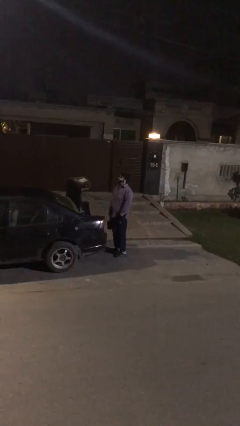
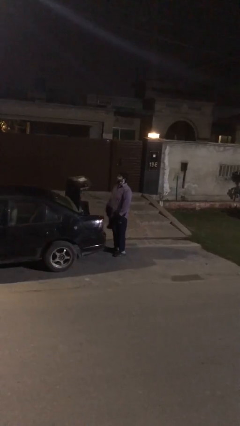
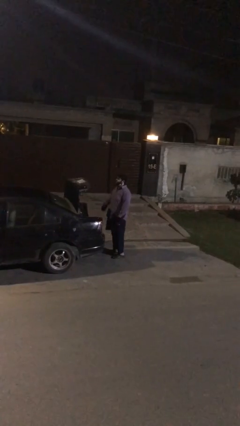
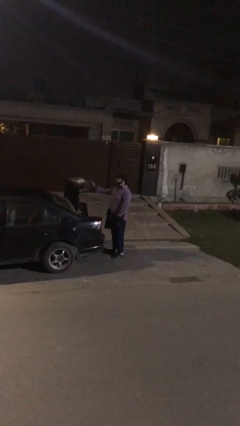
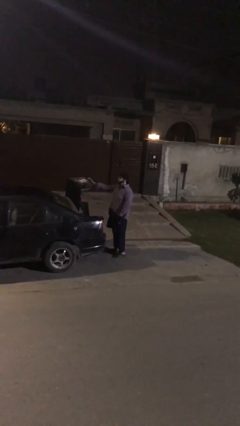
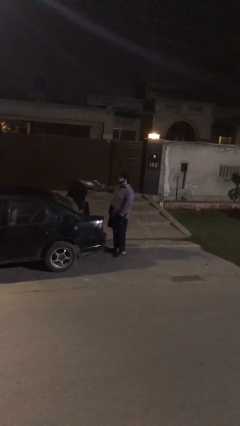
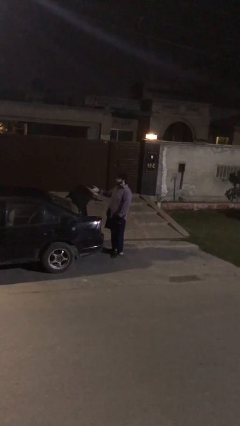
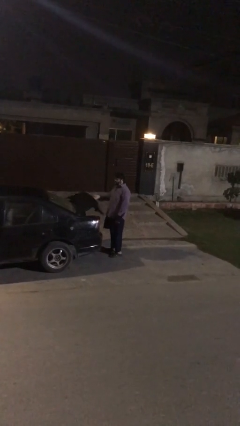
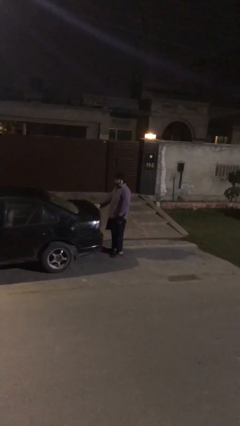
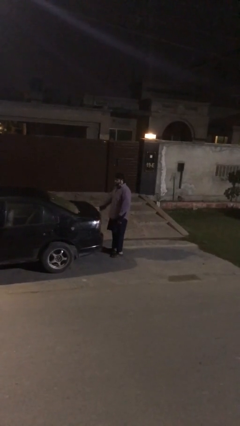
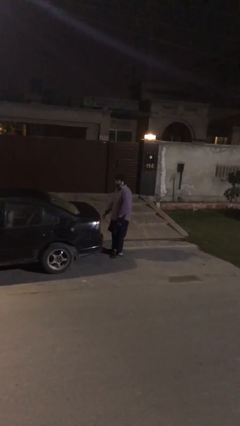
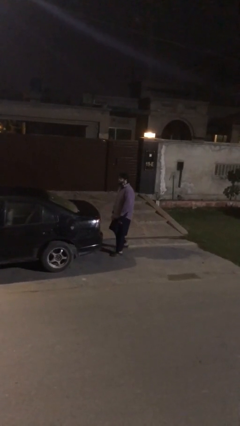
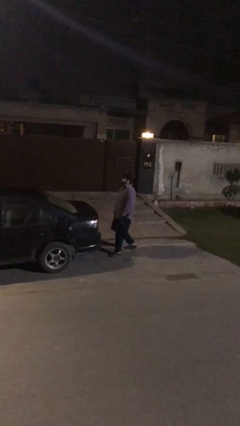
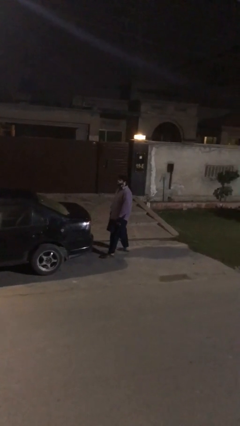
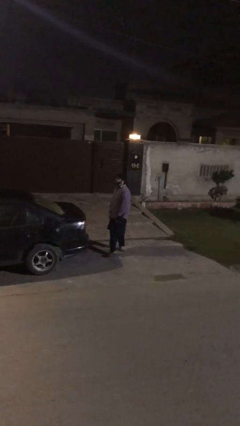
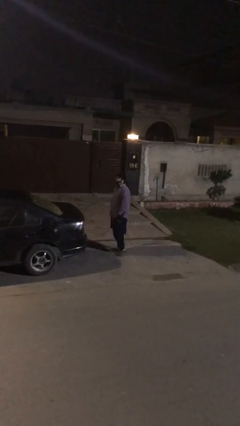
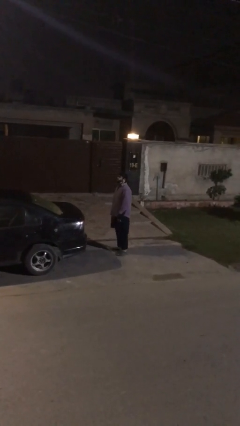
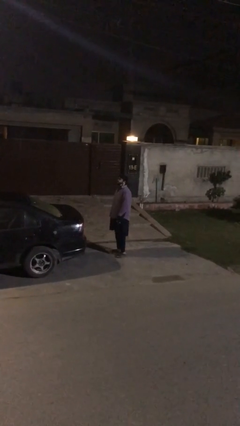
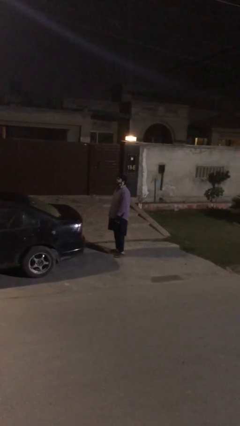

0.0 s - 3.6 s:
person closes car trunk

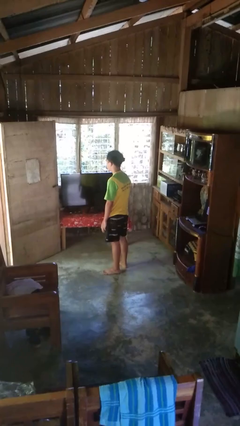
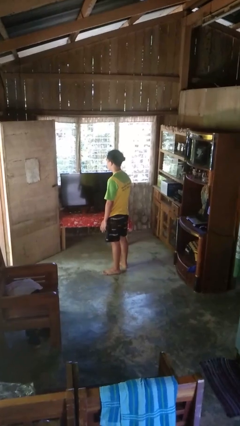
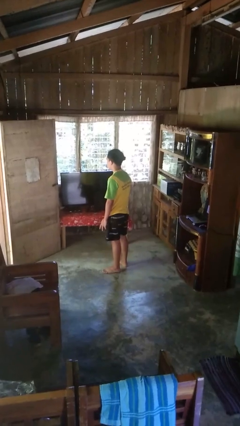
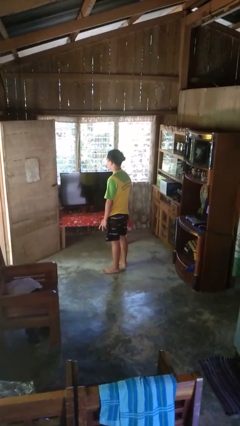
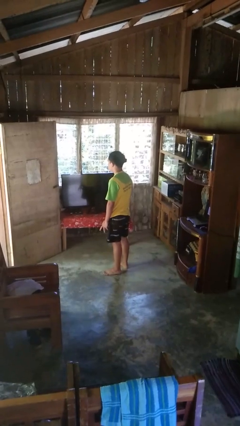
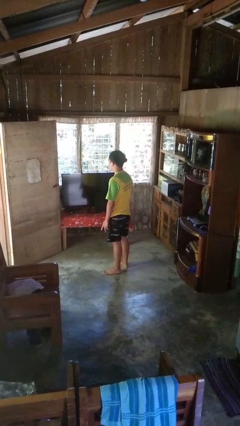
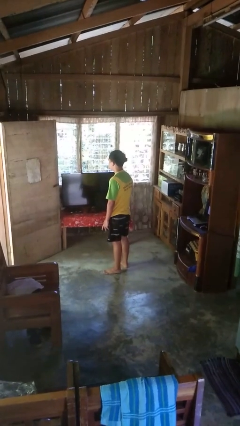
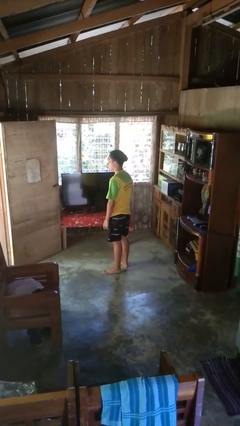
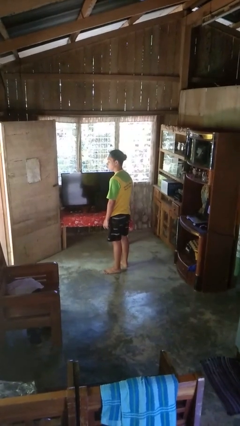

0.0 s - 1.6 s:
person shakes head

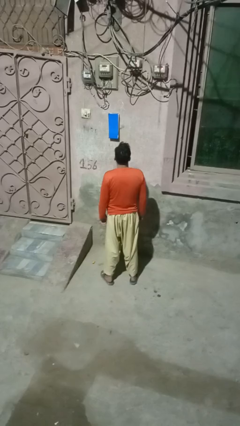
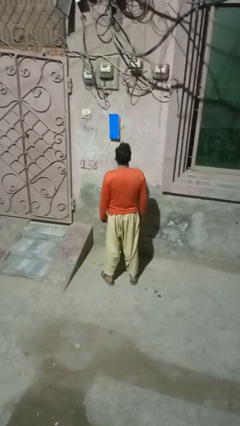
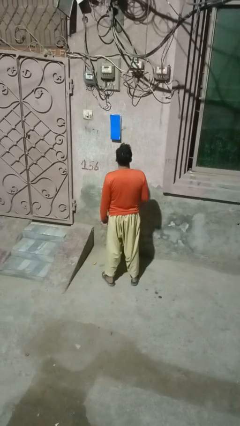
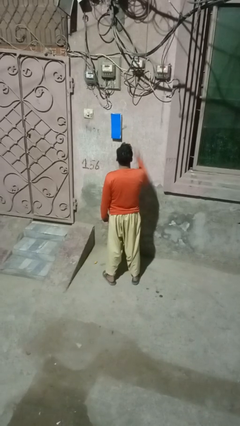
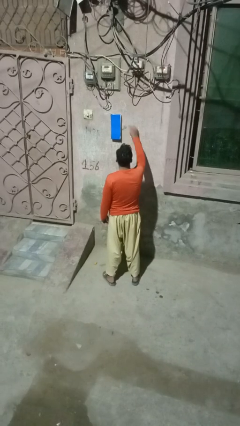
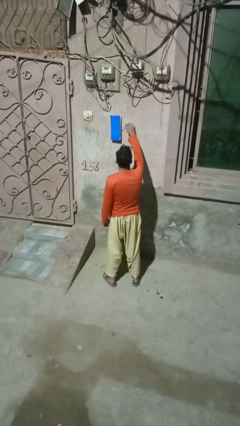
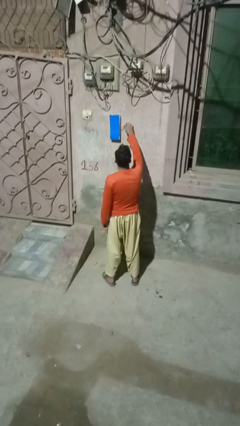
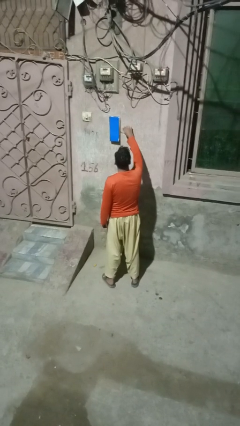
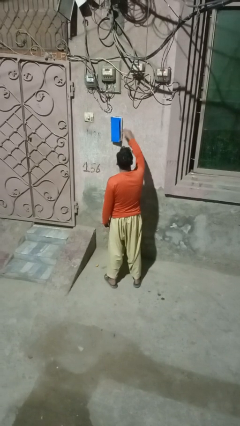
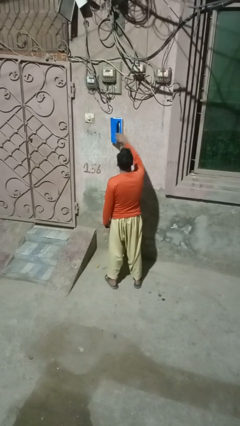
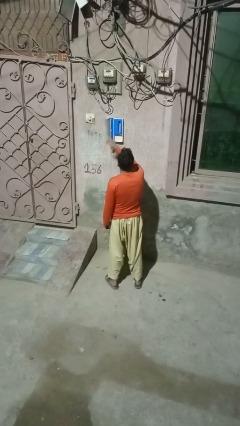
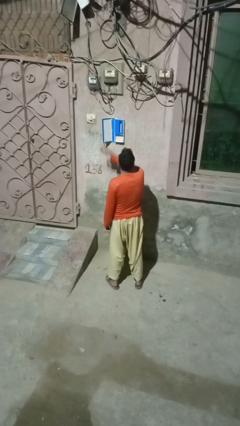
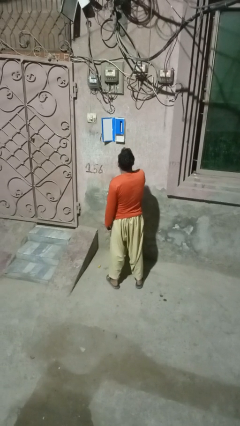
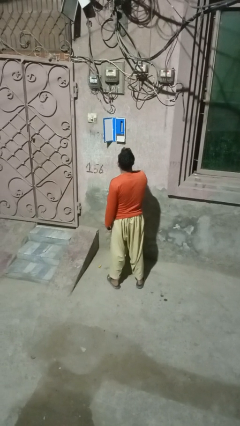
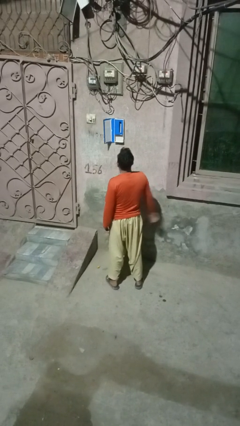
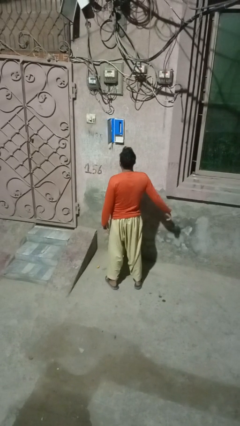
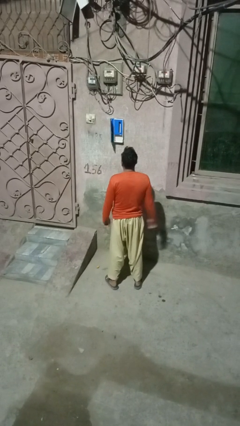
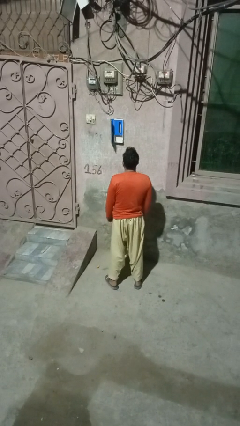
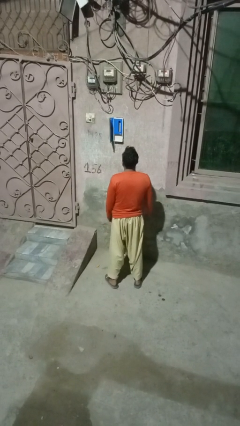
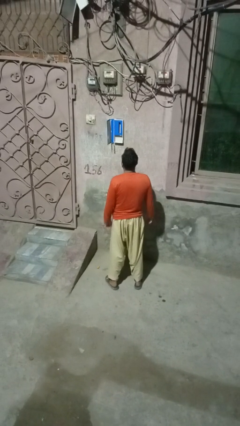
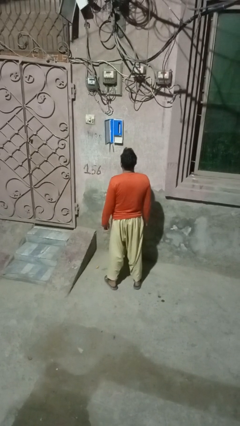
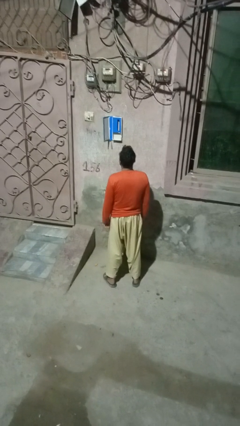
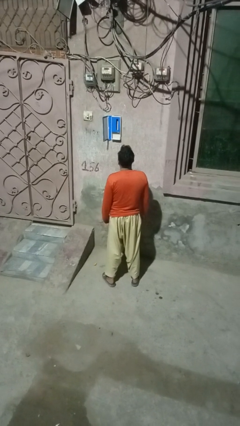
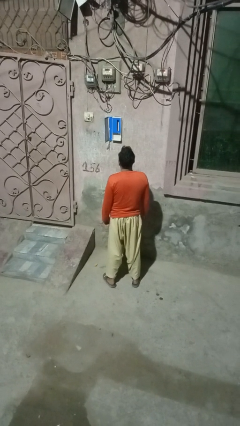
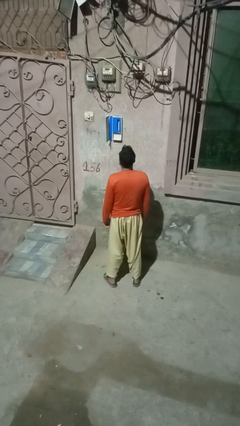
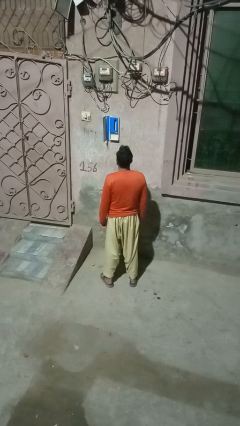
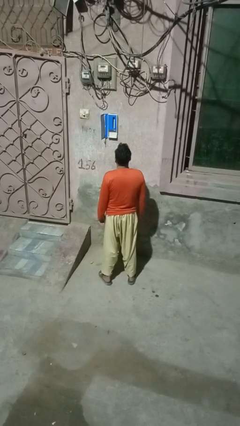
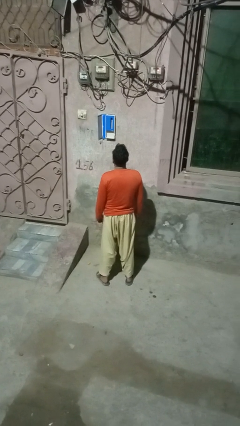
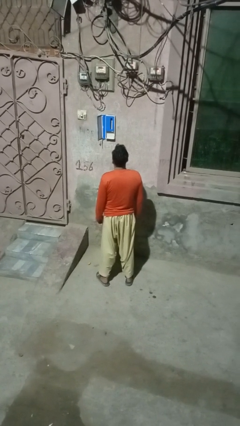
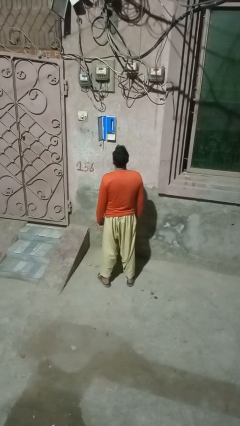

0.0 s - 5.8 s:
person opens mailbox

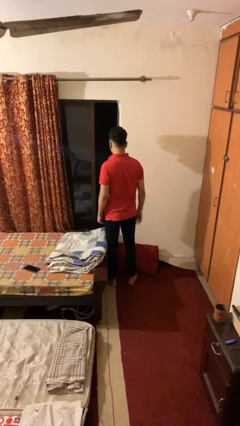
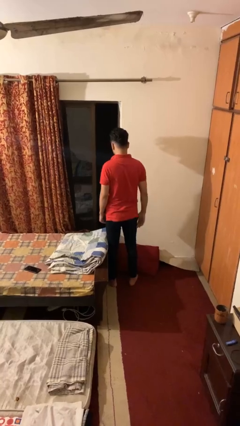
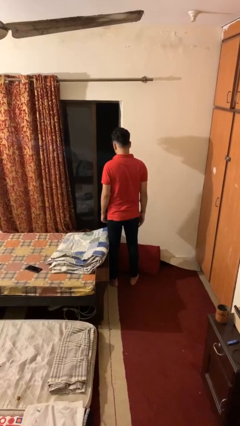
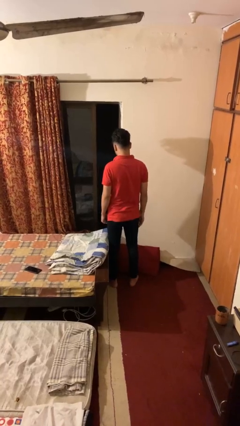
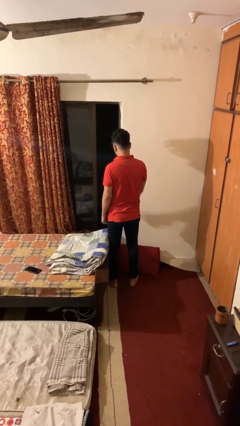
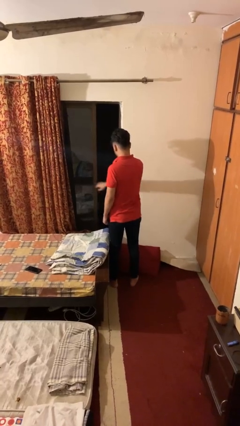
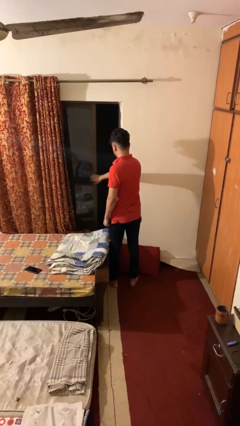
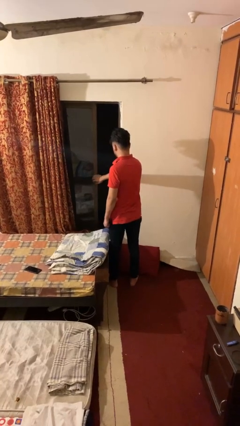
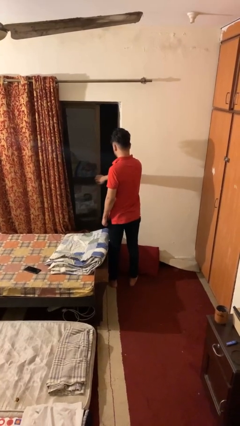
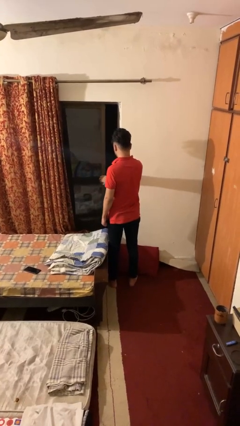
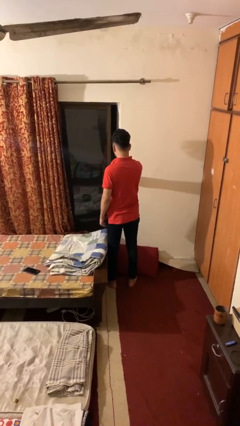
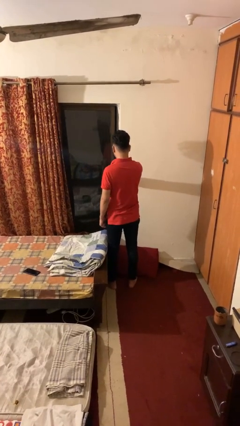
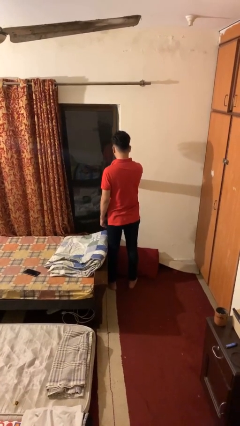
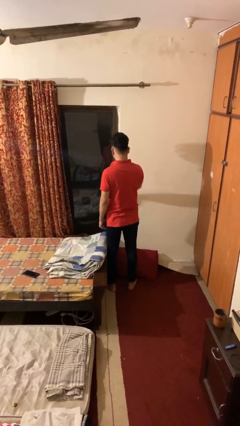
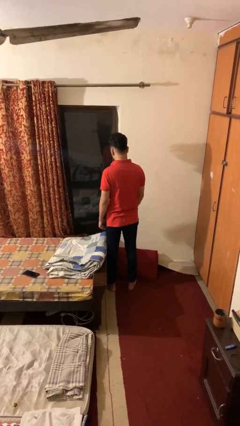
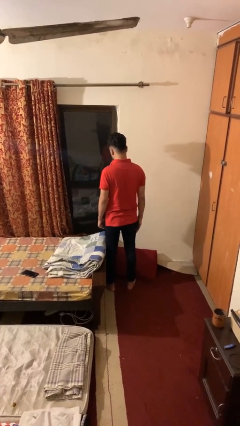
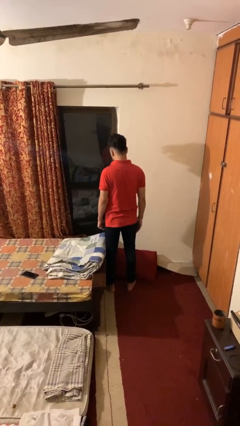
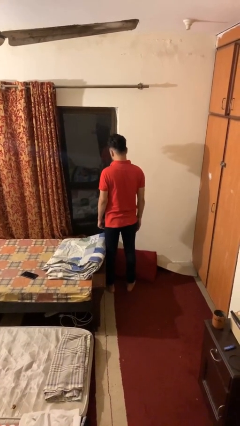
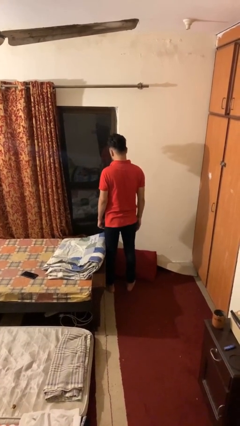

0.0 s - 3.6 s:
person closes home window

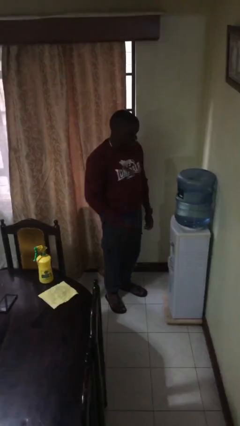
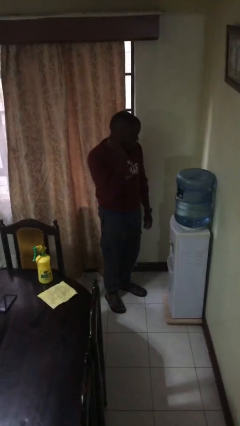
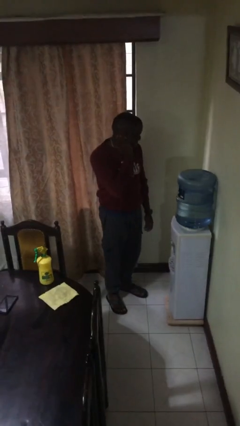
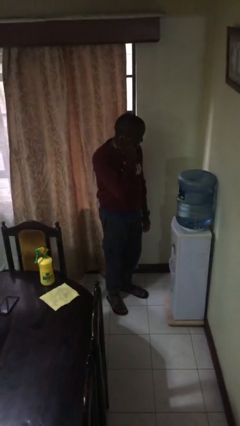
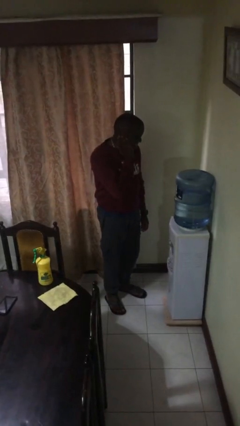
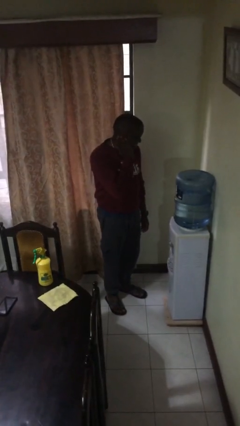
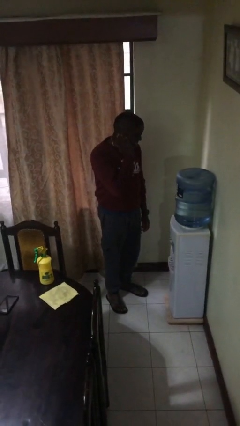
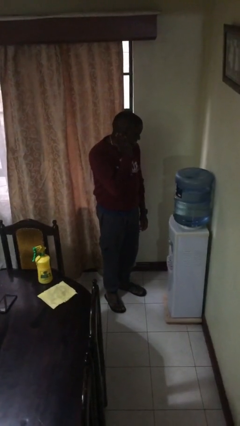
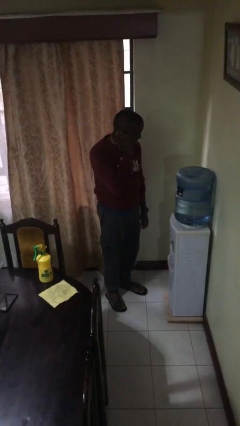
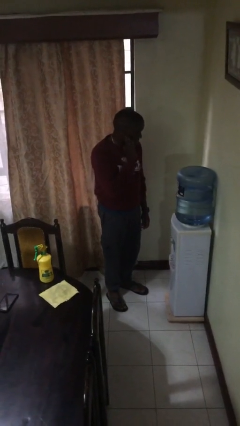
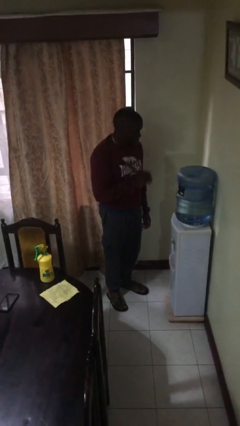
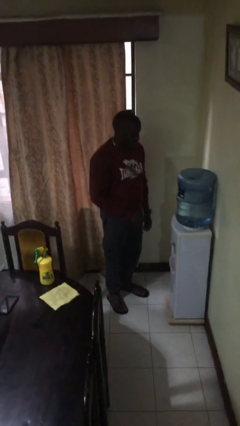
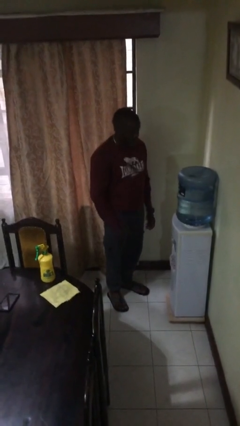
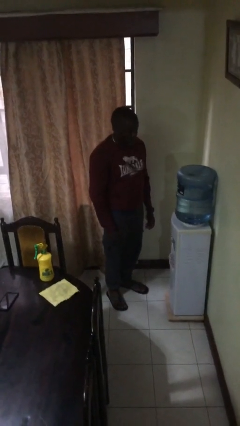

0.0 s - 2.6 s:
person swats bug

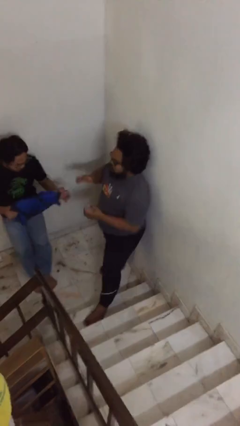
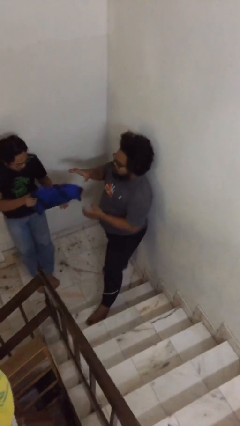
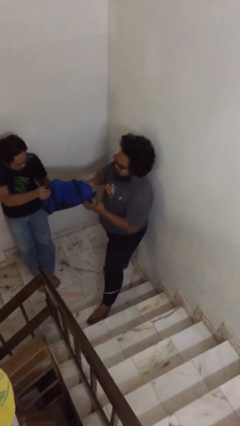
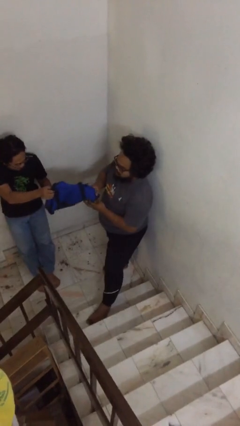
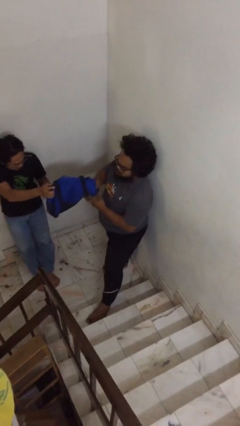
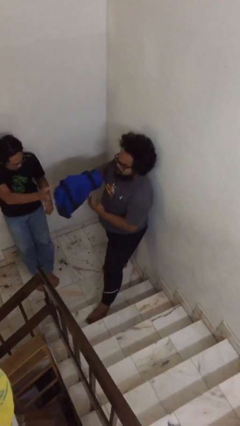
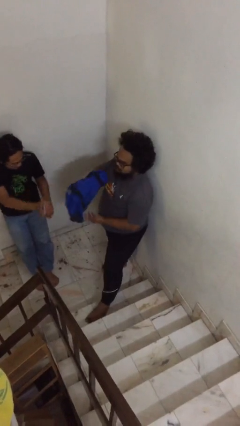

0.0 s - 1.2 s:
person transfers object to person
